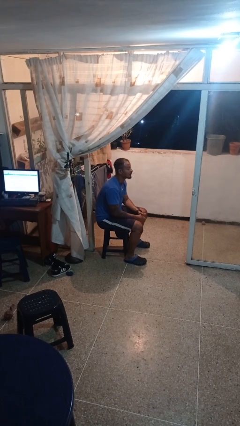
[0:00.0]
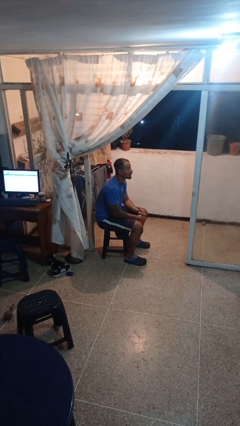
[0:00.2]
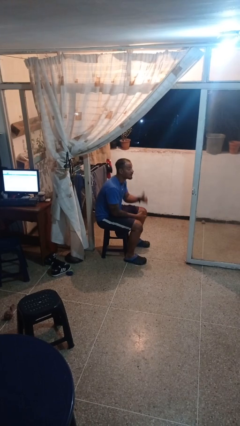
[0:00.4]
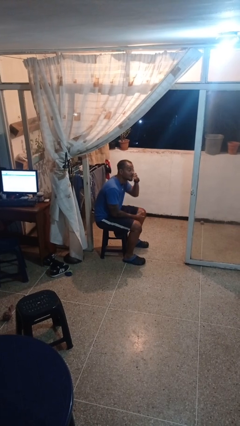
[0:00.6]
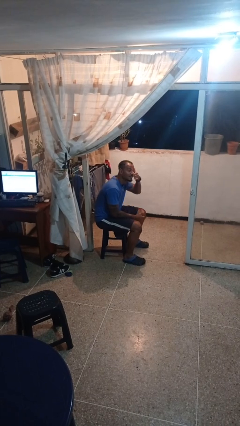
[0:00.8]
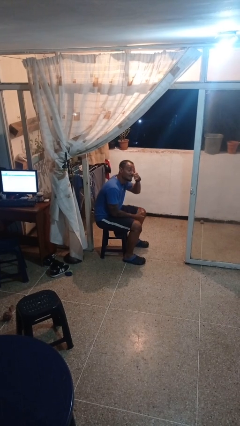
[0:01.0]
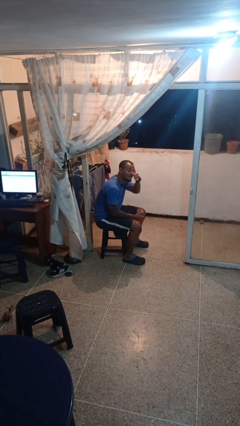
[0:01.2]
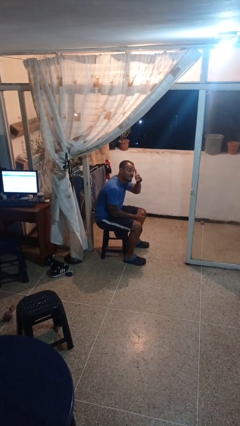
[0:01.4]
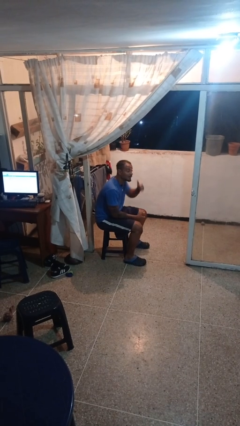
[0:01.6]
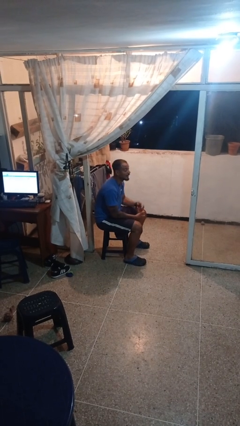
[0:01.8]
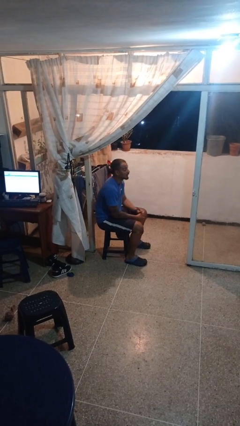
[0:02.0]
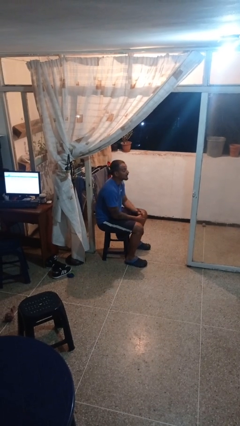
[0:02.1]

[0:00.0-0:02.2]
person gestures call me

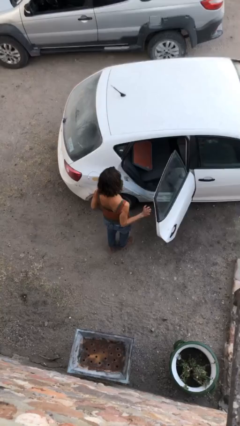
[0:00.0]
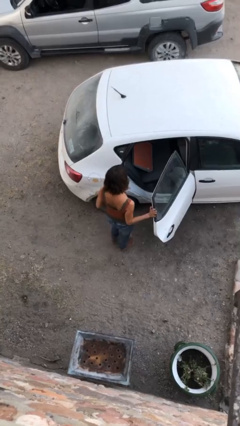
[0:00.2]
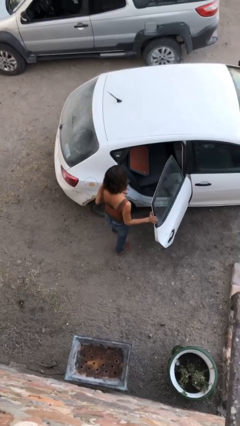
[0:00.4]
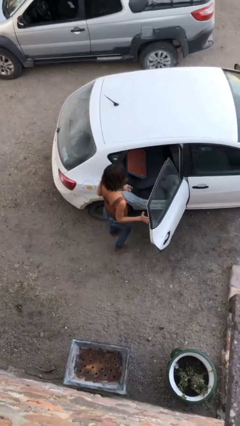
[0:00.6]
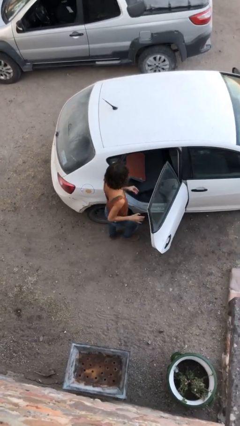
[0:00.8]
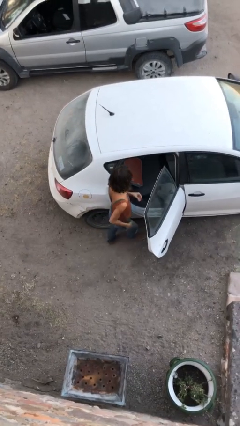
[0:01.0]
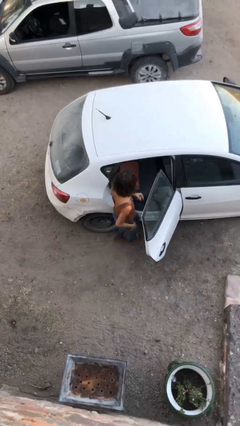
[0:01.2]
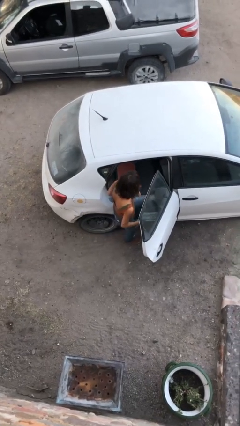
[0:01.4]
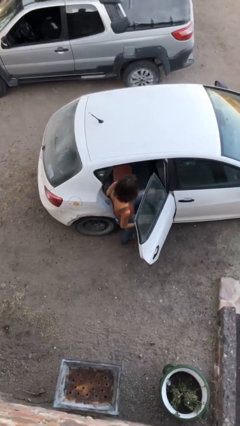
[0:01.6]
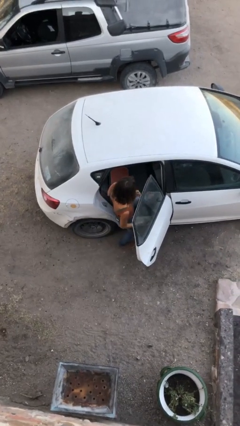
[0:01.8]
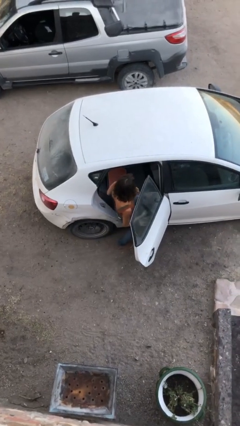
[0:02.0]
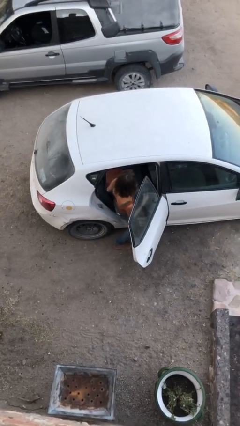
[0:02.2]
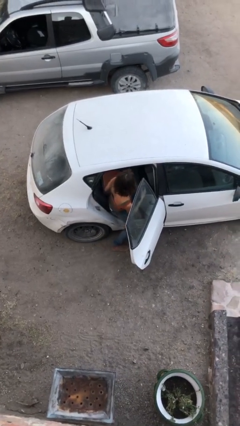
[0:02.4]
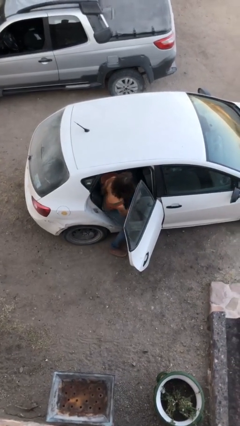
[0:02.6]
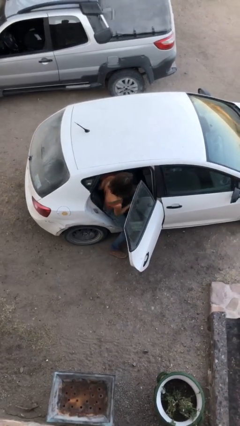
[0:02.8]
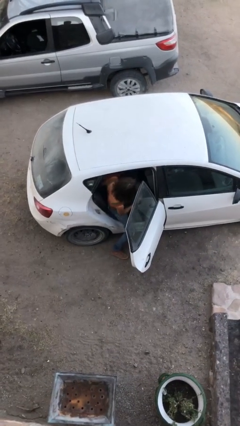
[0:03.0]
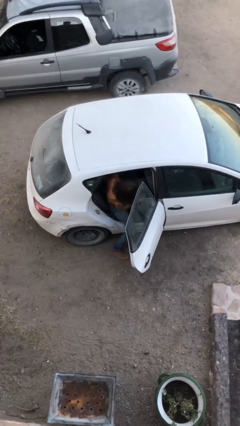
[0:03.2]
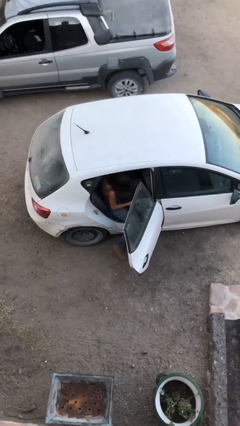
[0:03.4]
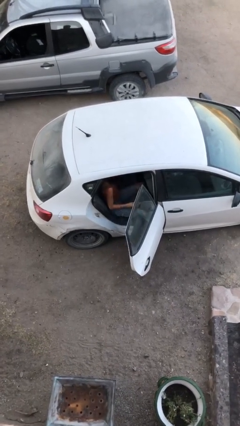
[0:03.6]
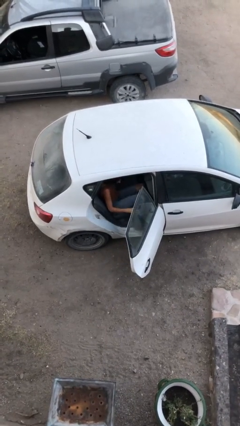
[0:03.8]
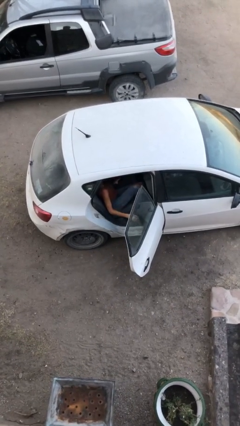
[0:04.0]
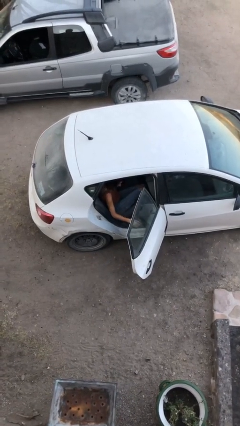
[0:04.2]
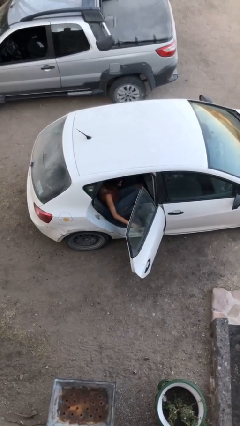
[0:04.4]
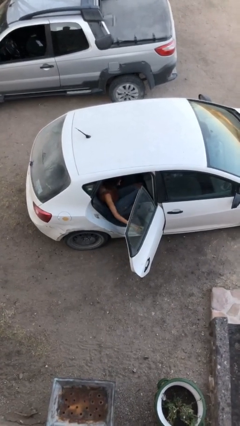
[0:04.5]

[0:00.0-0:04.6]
person enters car

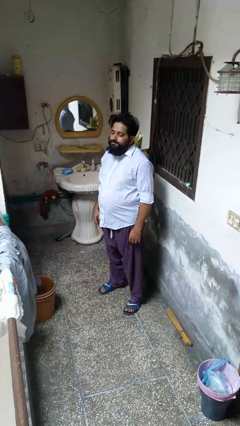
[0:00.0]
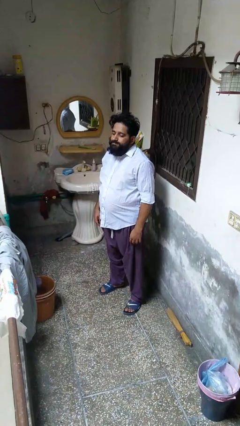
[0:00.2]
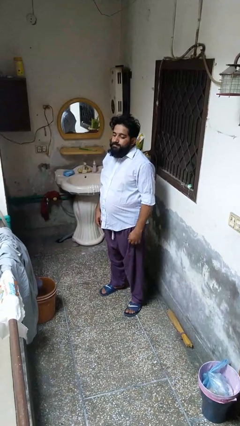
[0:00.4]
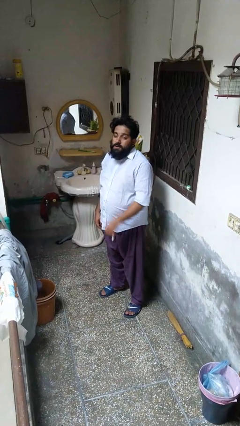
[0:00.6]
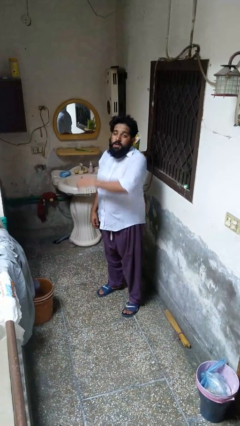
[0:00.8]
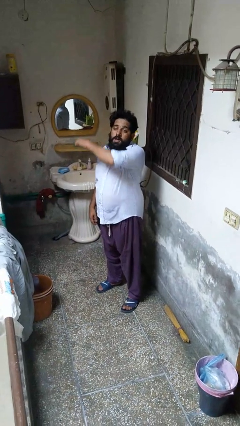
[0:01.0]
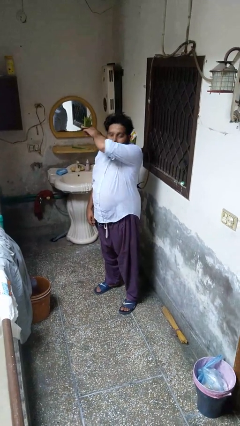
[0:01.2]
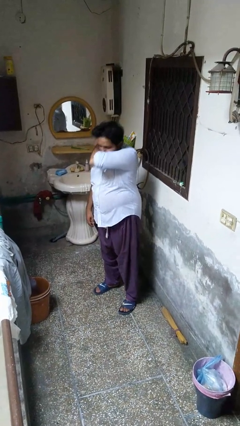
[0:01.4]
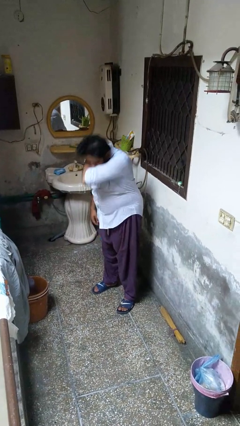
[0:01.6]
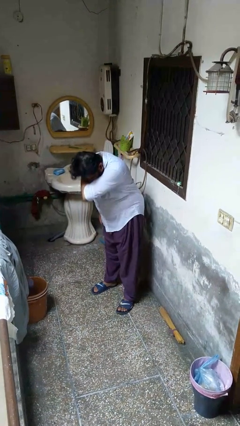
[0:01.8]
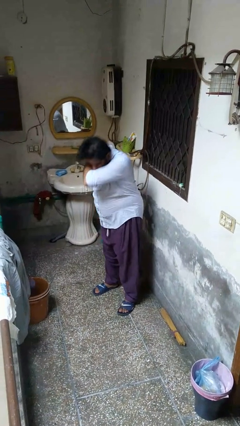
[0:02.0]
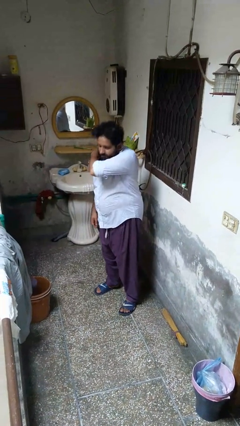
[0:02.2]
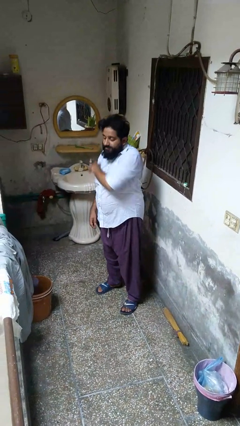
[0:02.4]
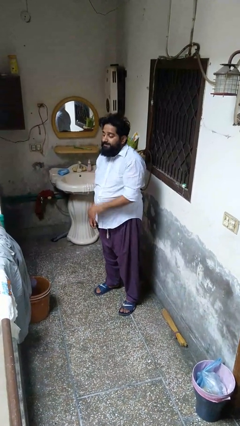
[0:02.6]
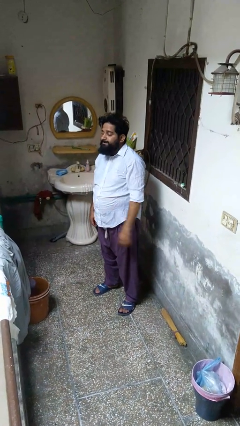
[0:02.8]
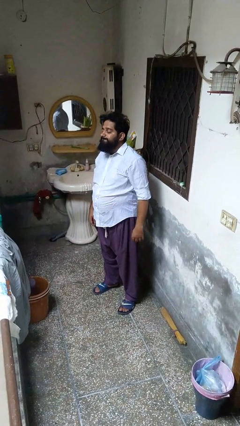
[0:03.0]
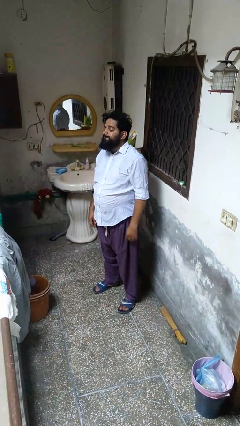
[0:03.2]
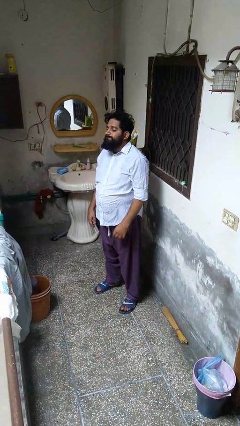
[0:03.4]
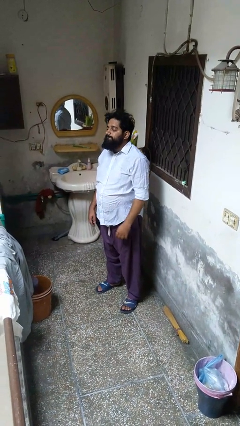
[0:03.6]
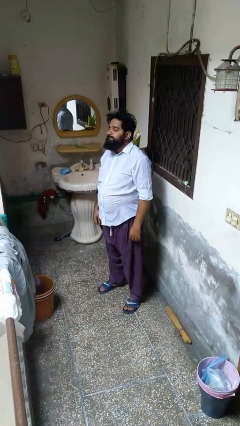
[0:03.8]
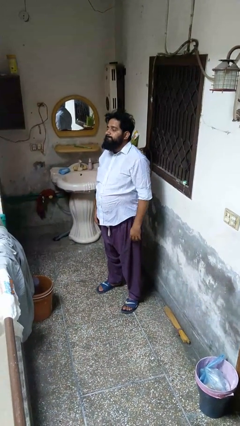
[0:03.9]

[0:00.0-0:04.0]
person sneezes into arm

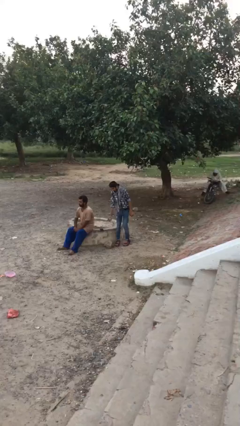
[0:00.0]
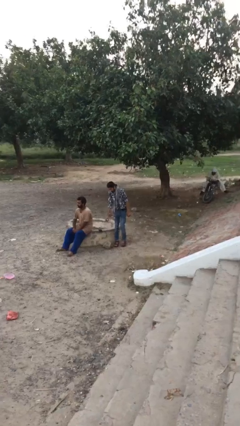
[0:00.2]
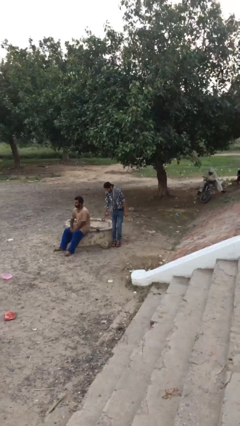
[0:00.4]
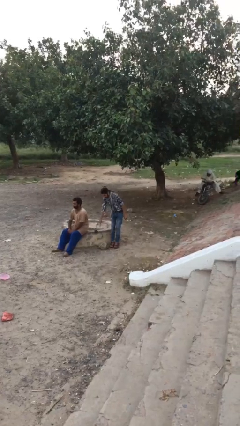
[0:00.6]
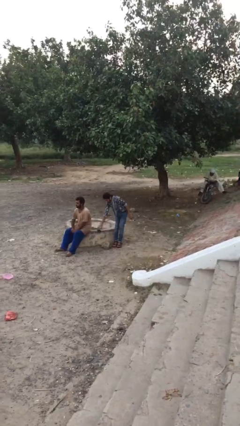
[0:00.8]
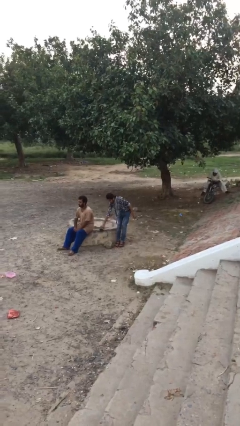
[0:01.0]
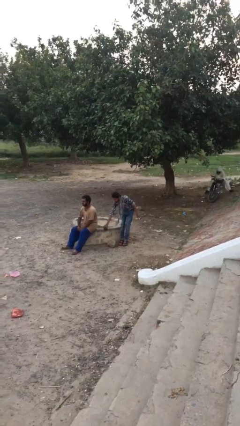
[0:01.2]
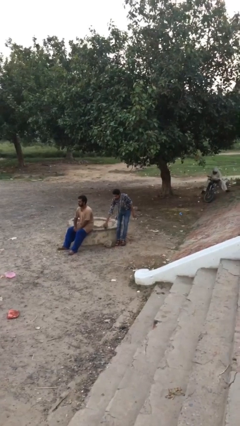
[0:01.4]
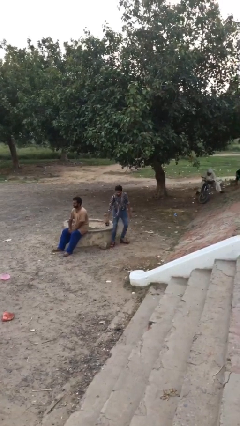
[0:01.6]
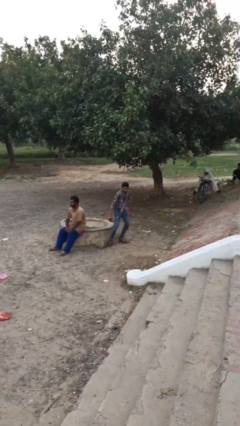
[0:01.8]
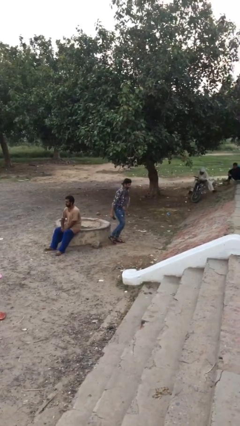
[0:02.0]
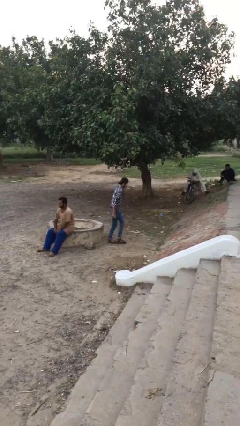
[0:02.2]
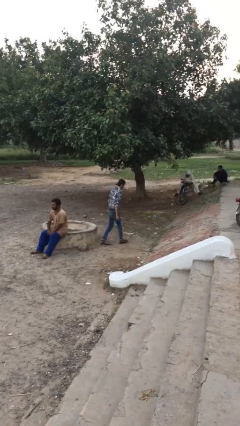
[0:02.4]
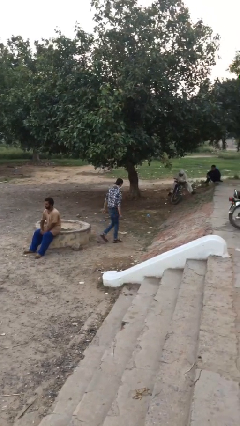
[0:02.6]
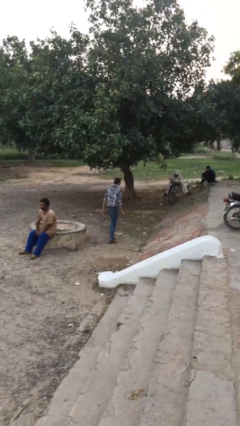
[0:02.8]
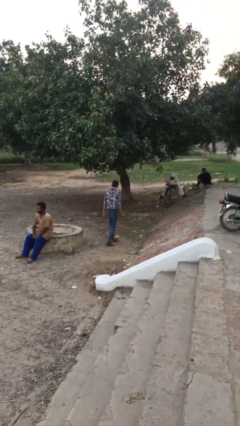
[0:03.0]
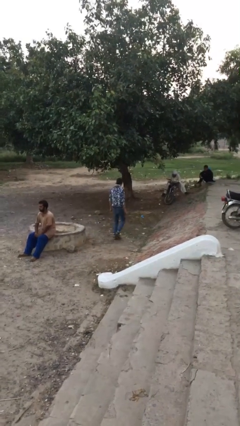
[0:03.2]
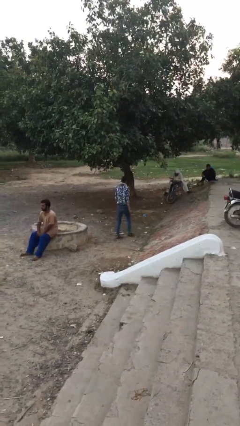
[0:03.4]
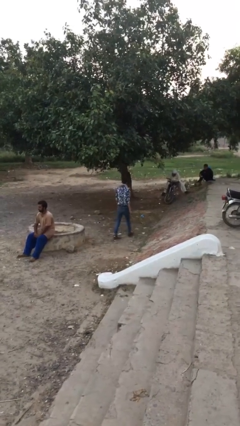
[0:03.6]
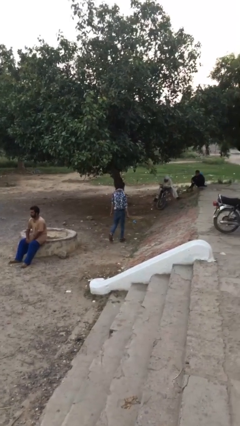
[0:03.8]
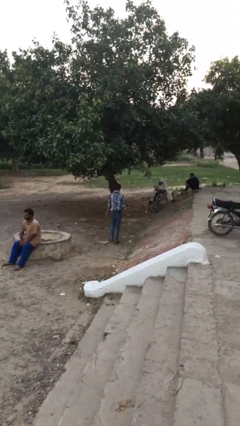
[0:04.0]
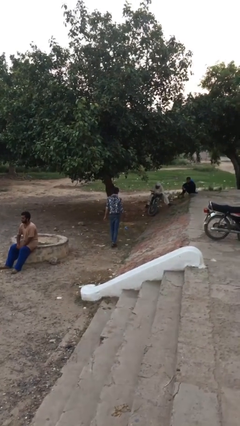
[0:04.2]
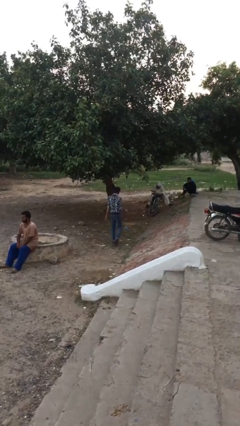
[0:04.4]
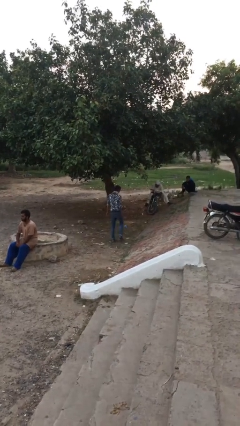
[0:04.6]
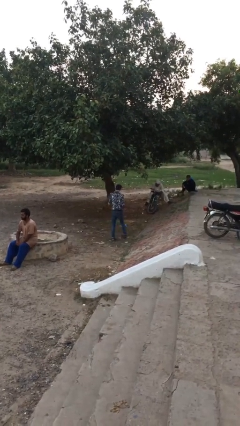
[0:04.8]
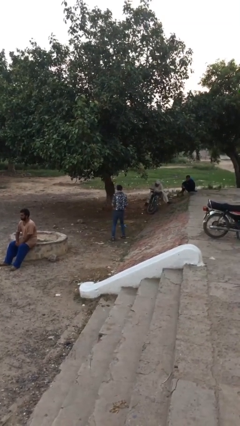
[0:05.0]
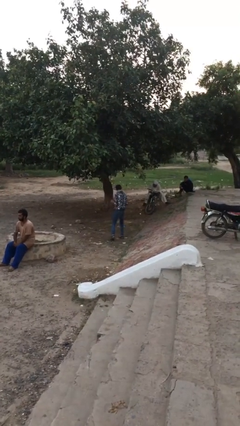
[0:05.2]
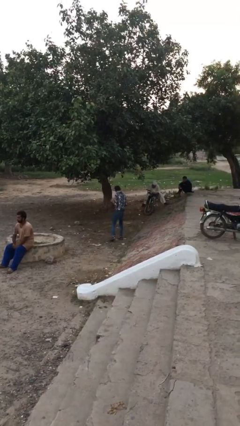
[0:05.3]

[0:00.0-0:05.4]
person steals object from person

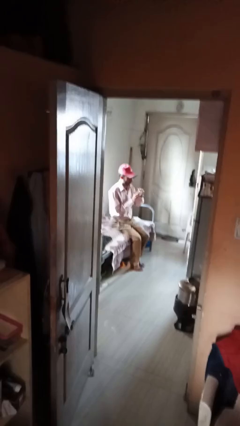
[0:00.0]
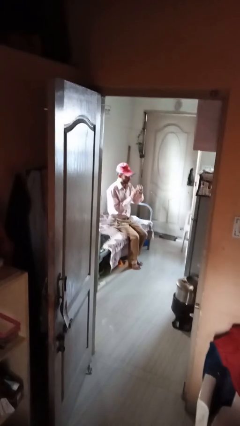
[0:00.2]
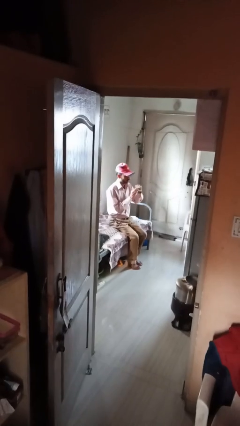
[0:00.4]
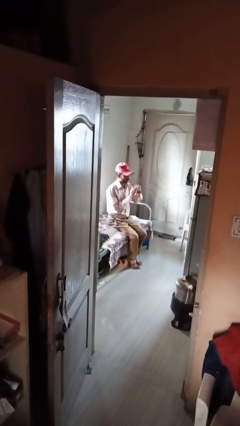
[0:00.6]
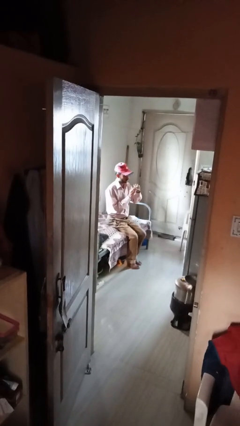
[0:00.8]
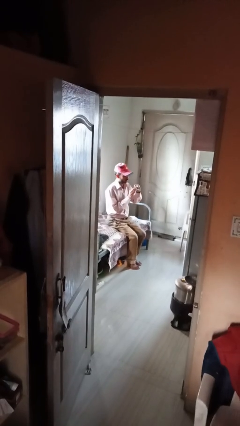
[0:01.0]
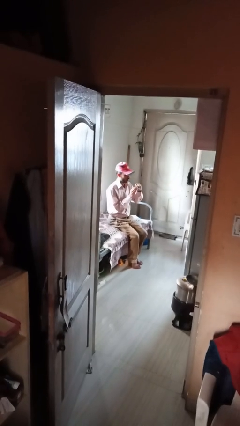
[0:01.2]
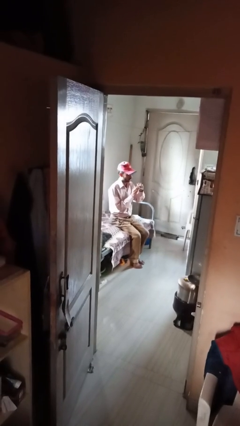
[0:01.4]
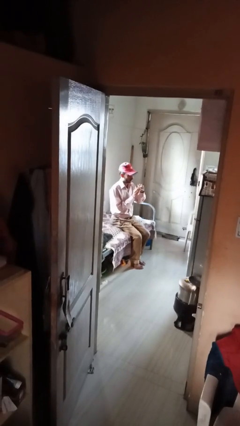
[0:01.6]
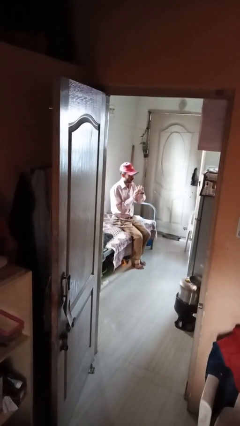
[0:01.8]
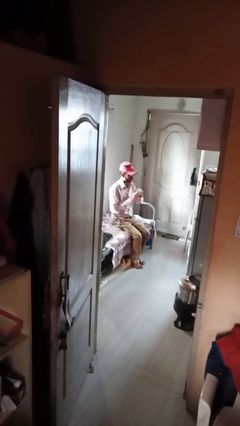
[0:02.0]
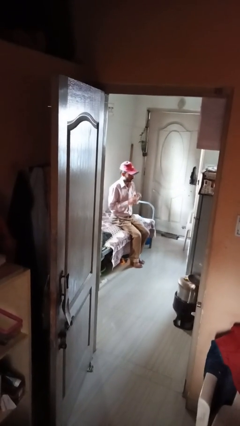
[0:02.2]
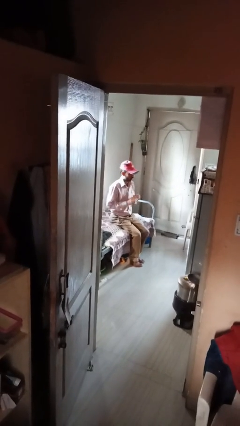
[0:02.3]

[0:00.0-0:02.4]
person files fingernails
